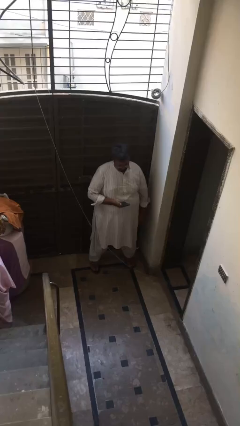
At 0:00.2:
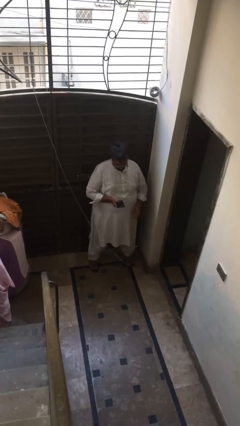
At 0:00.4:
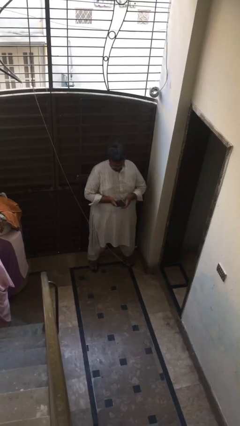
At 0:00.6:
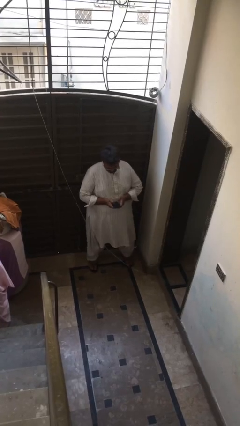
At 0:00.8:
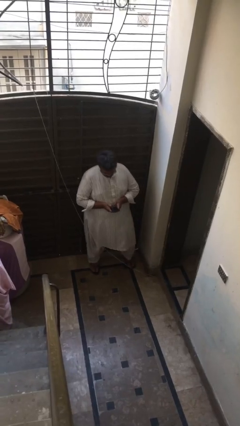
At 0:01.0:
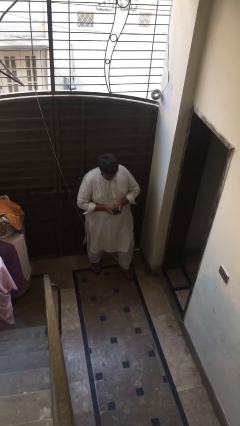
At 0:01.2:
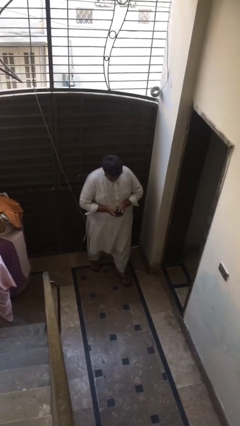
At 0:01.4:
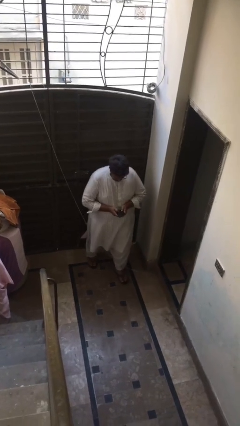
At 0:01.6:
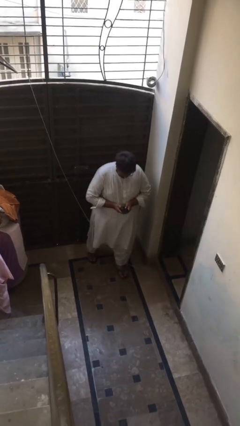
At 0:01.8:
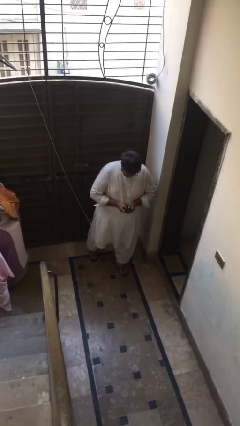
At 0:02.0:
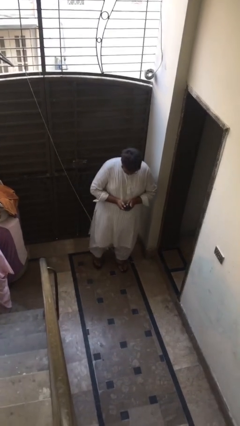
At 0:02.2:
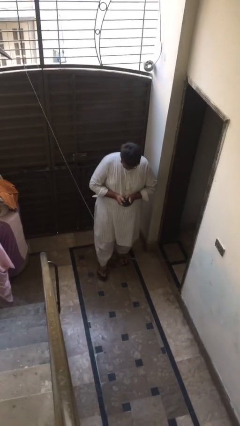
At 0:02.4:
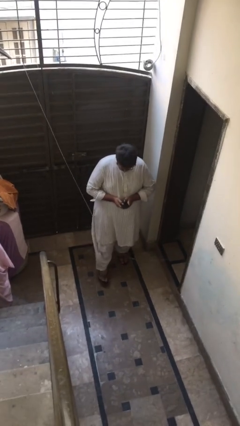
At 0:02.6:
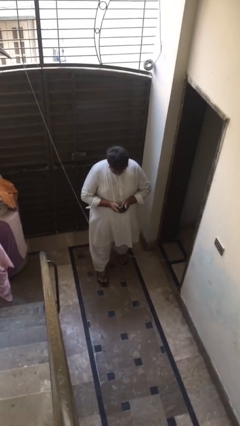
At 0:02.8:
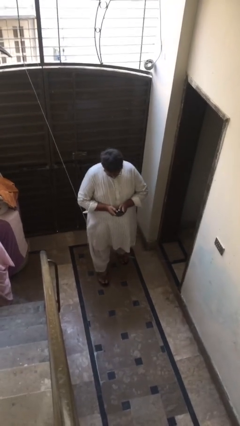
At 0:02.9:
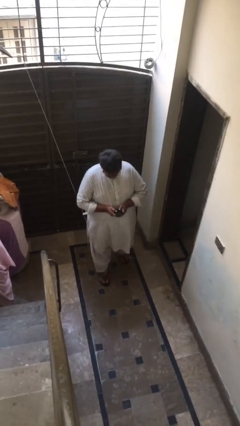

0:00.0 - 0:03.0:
person texts on phone

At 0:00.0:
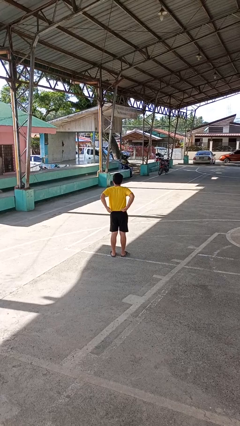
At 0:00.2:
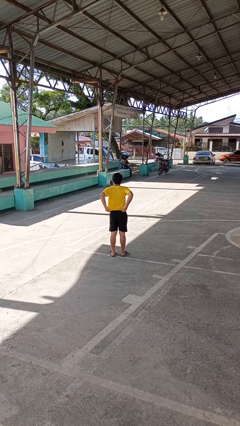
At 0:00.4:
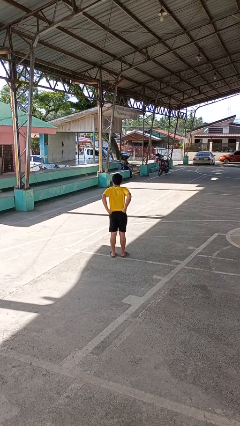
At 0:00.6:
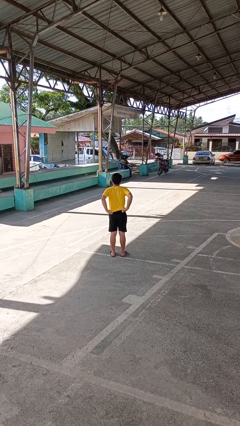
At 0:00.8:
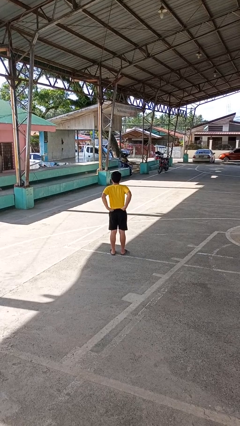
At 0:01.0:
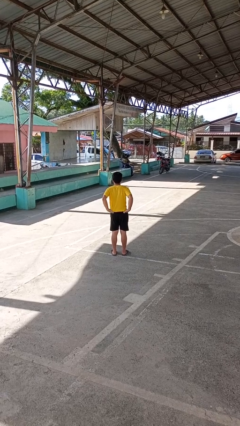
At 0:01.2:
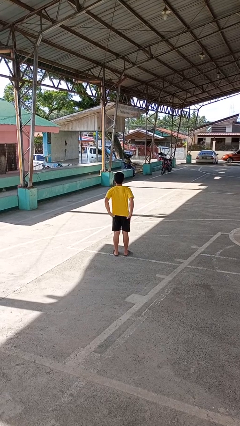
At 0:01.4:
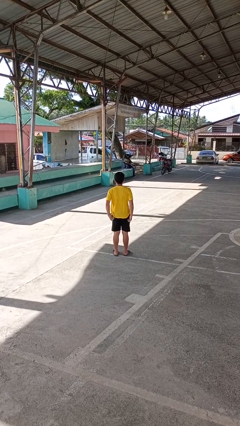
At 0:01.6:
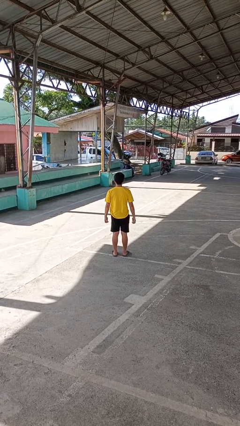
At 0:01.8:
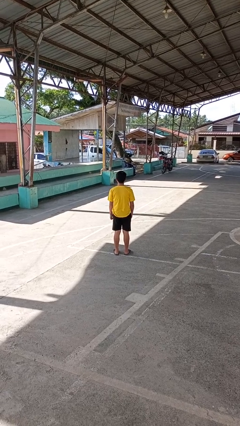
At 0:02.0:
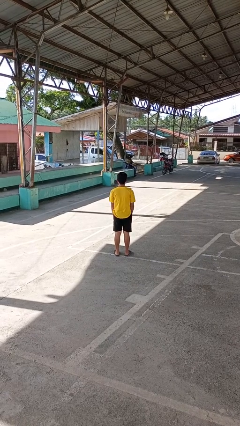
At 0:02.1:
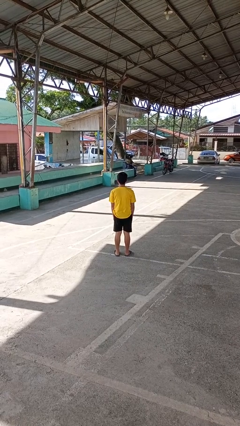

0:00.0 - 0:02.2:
person untucks shirt

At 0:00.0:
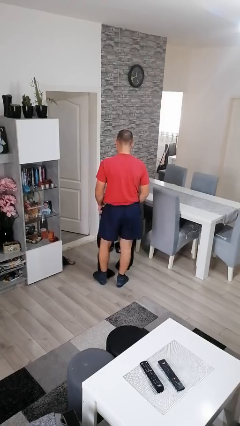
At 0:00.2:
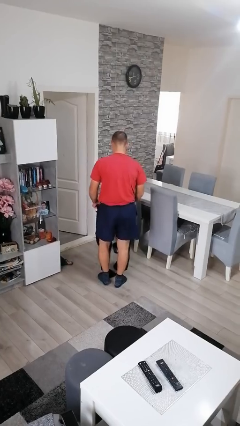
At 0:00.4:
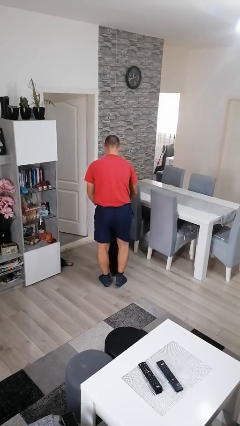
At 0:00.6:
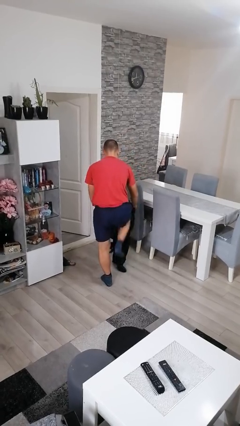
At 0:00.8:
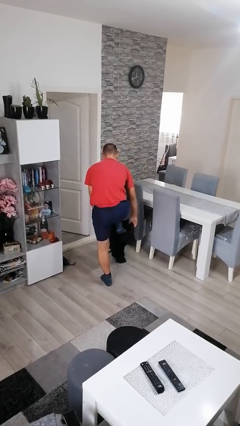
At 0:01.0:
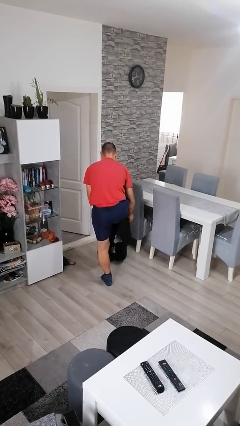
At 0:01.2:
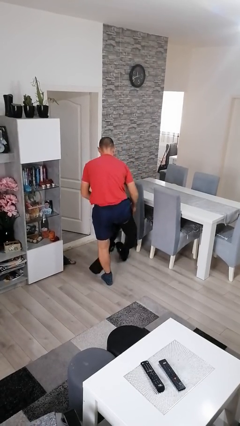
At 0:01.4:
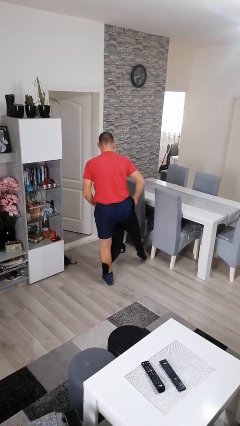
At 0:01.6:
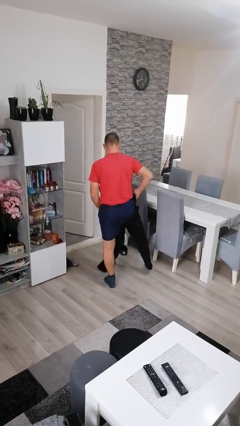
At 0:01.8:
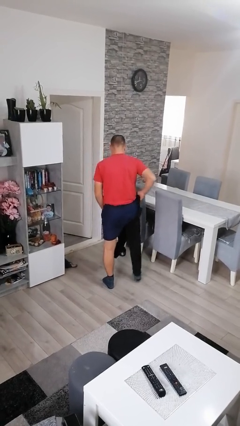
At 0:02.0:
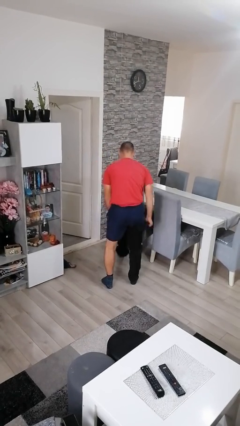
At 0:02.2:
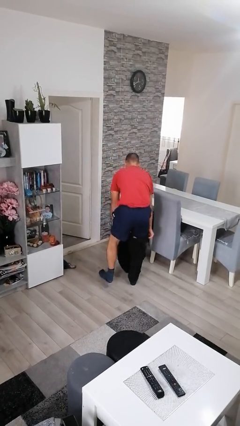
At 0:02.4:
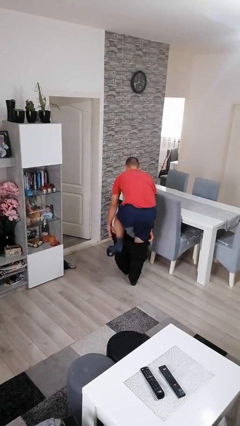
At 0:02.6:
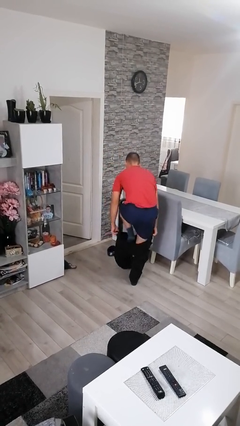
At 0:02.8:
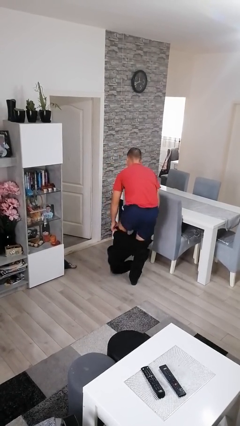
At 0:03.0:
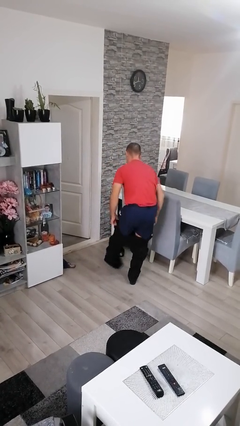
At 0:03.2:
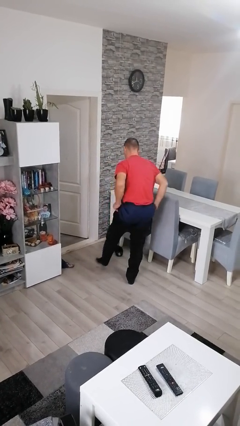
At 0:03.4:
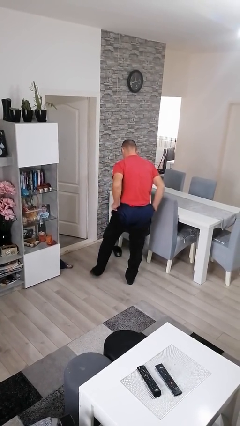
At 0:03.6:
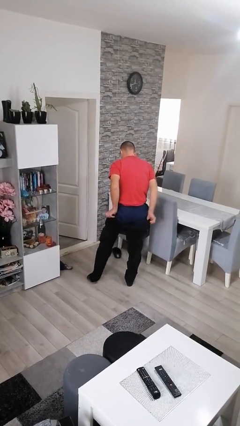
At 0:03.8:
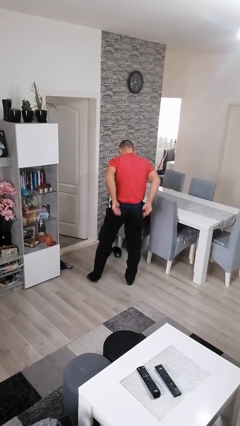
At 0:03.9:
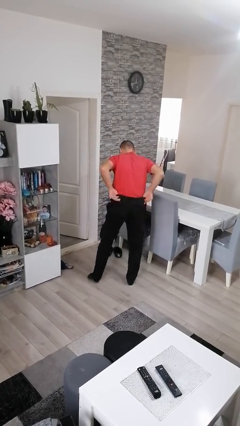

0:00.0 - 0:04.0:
person puts on pants

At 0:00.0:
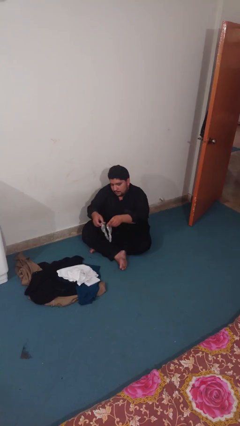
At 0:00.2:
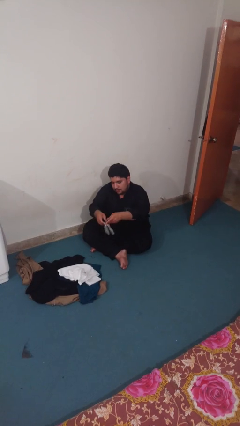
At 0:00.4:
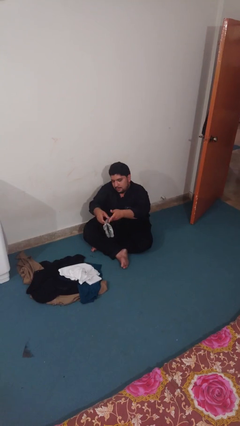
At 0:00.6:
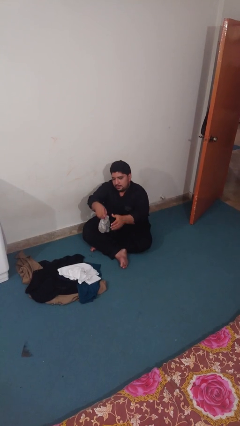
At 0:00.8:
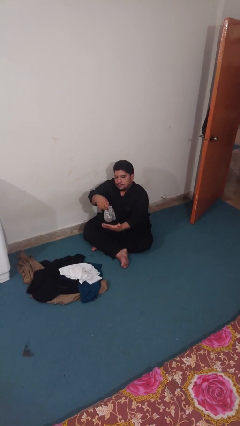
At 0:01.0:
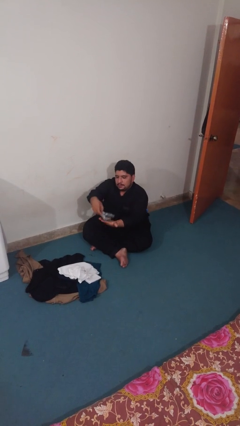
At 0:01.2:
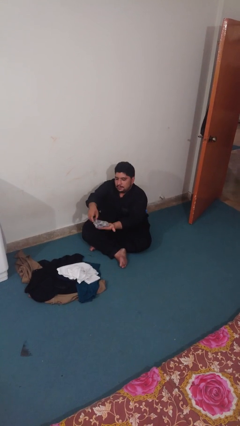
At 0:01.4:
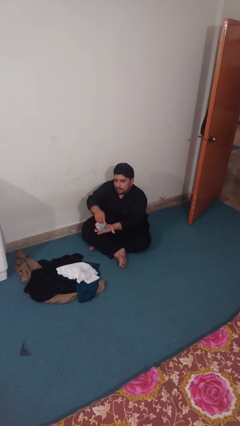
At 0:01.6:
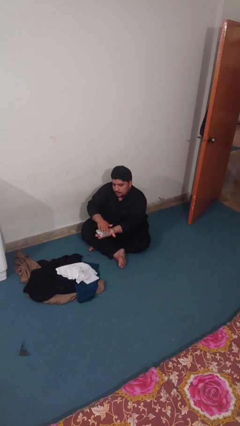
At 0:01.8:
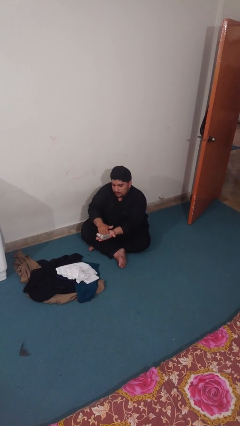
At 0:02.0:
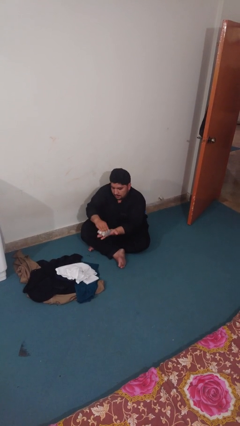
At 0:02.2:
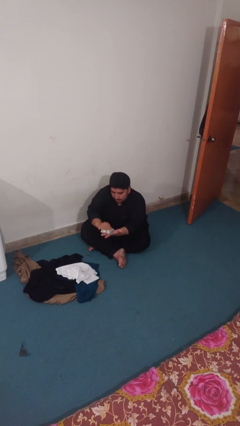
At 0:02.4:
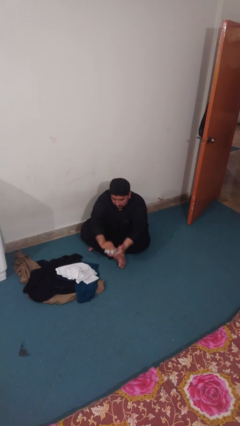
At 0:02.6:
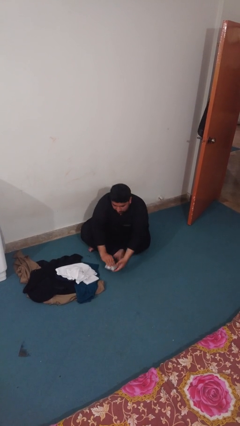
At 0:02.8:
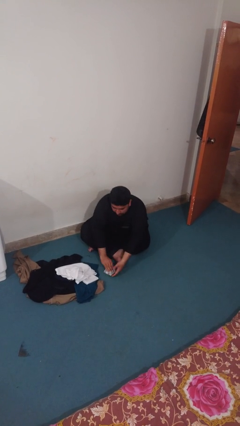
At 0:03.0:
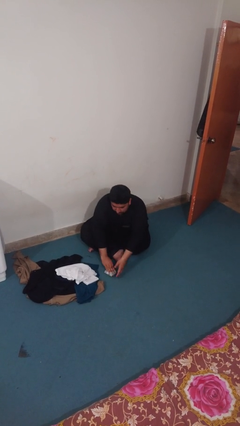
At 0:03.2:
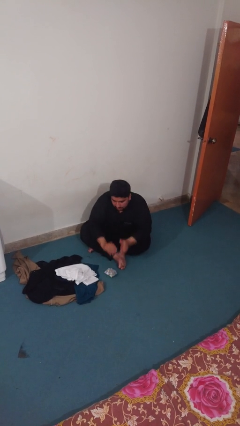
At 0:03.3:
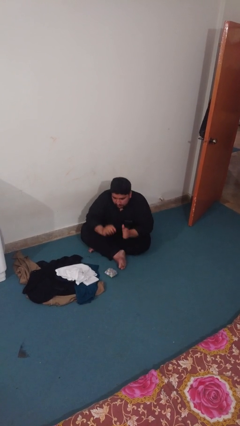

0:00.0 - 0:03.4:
person folds socks

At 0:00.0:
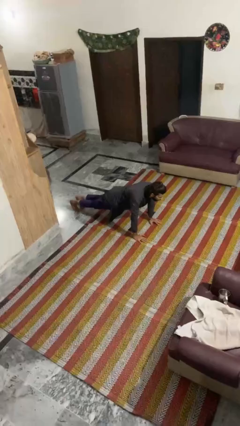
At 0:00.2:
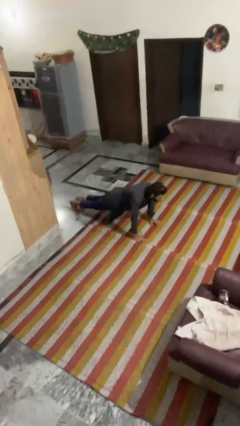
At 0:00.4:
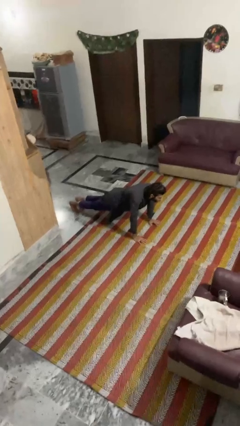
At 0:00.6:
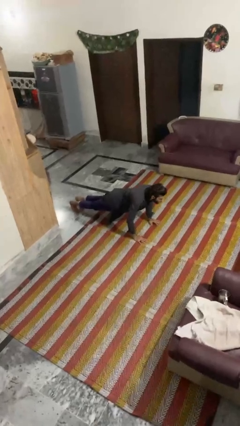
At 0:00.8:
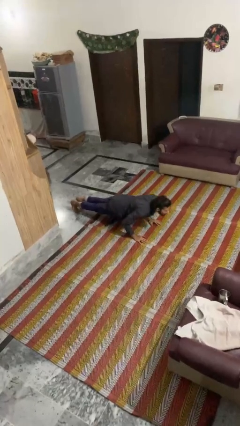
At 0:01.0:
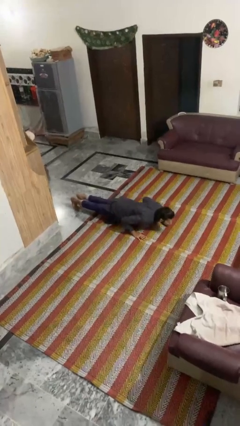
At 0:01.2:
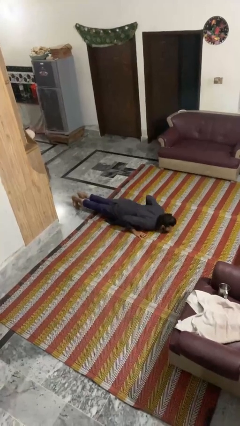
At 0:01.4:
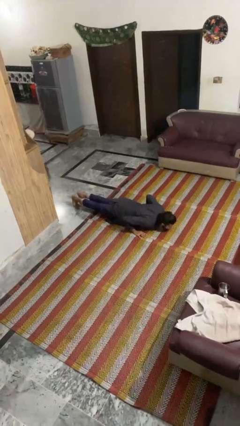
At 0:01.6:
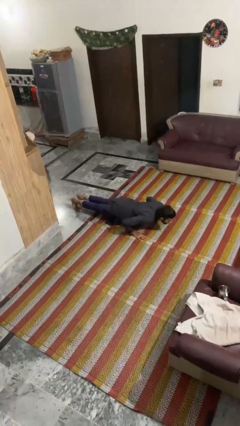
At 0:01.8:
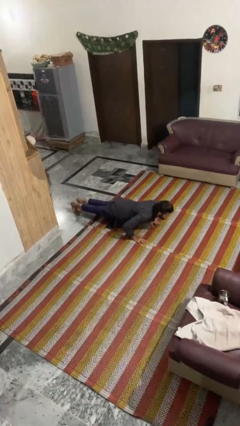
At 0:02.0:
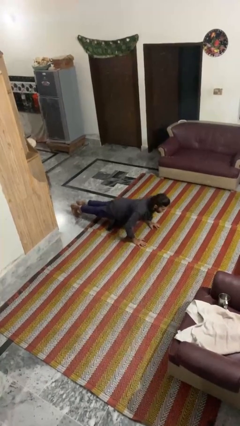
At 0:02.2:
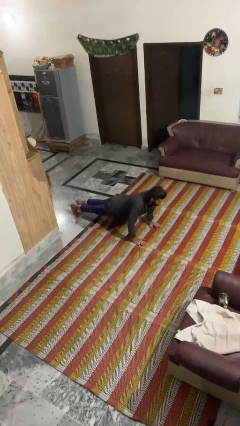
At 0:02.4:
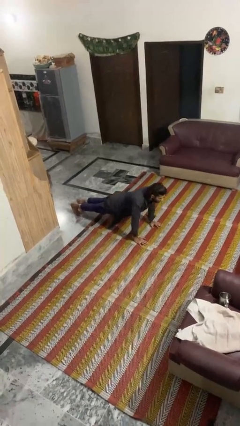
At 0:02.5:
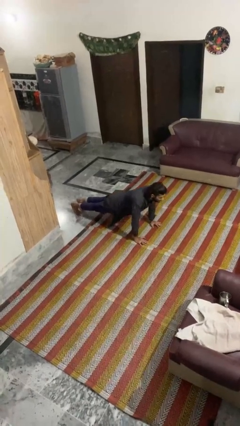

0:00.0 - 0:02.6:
person exercises with pushup

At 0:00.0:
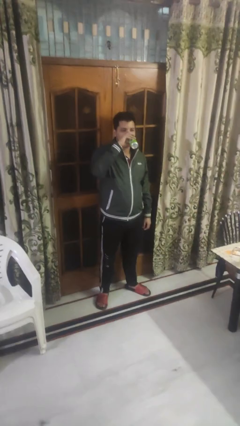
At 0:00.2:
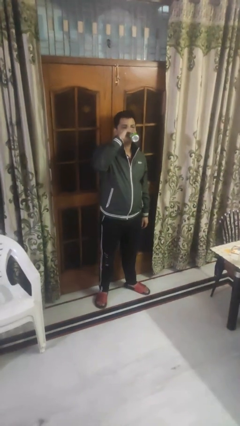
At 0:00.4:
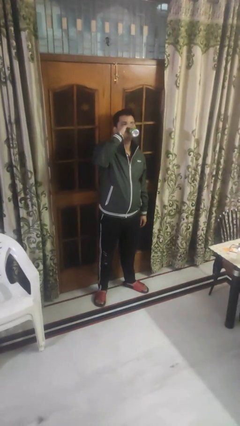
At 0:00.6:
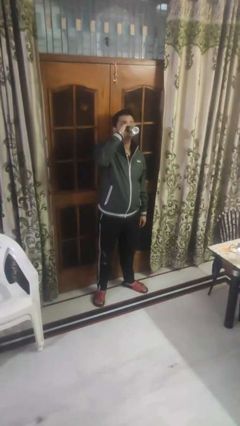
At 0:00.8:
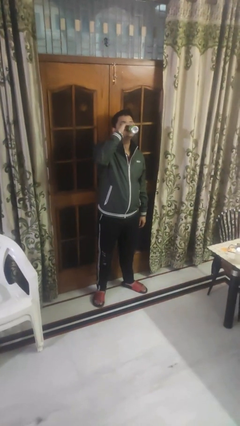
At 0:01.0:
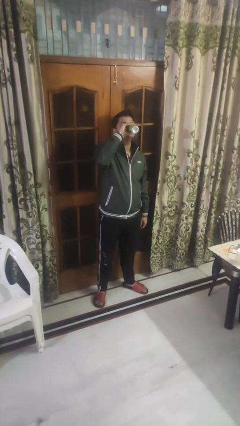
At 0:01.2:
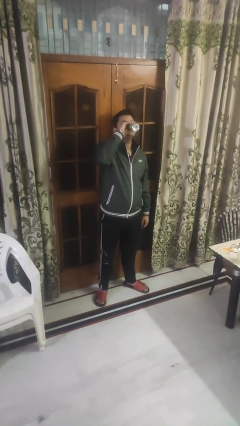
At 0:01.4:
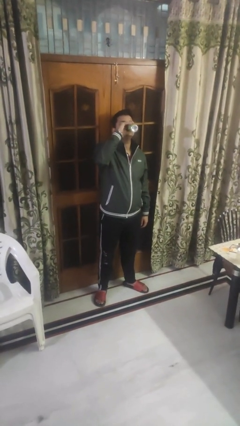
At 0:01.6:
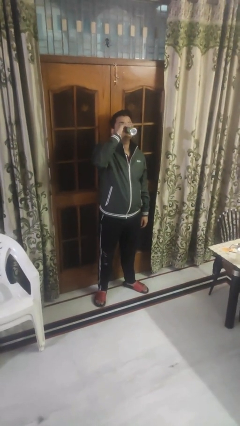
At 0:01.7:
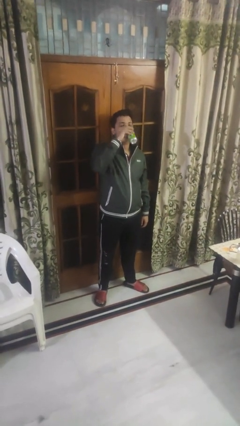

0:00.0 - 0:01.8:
person drinks from beverage can

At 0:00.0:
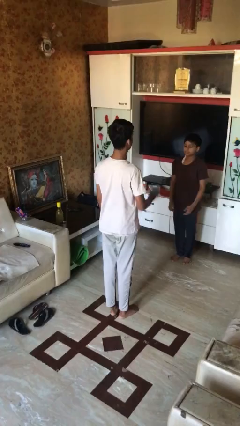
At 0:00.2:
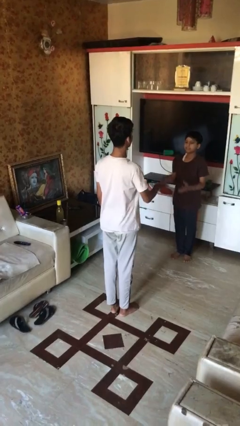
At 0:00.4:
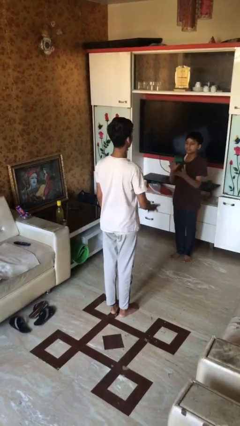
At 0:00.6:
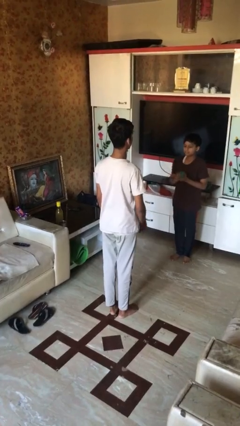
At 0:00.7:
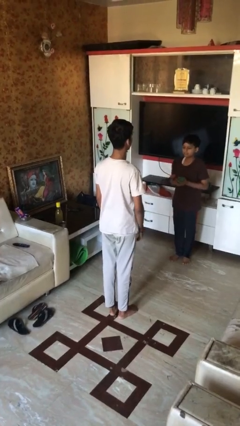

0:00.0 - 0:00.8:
person throws object to person
